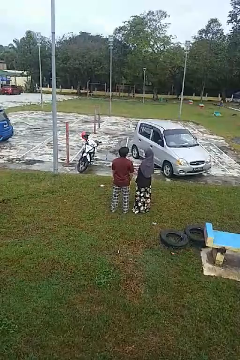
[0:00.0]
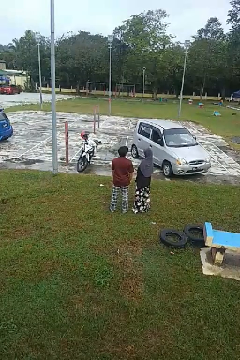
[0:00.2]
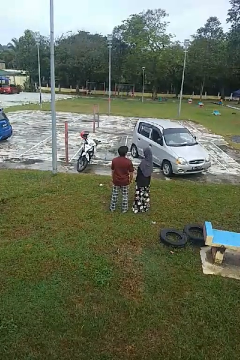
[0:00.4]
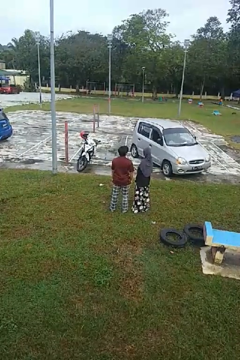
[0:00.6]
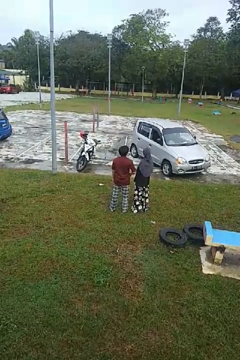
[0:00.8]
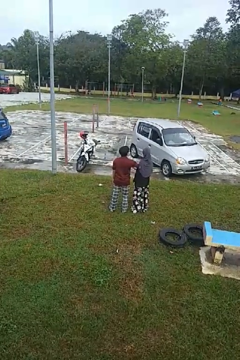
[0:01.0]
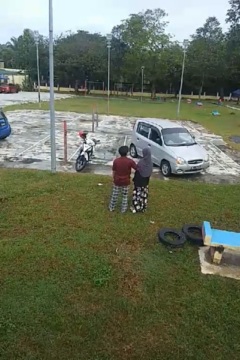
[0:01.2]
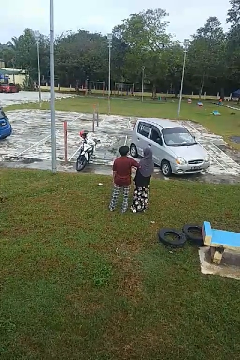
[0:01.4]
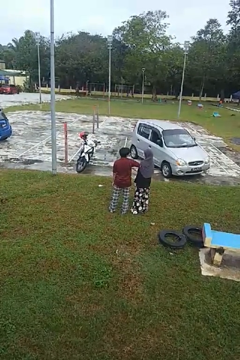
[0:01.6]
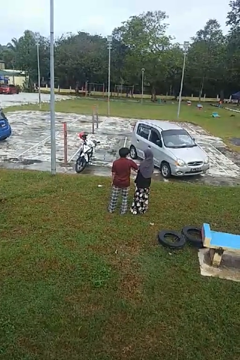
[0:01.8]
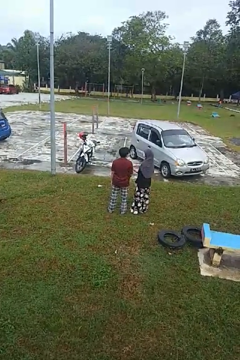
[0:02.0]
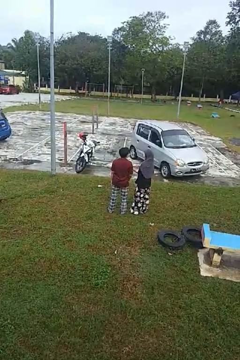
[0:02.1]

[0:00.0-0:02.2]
person nudges person with elbow

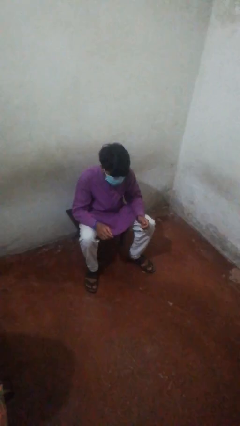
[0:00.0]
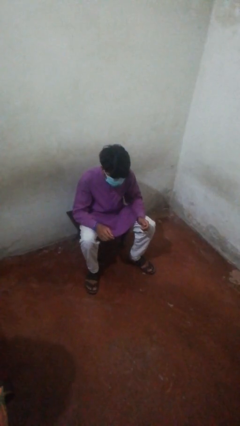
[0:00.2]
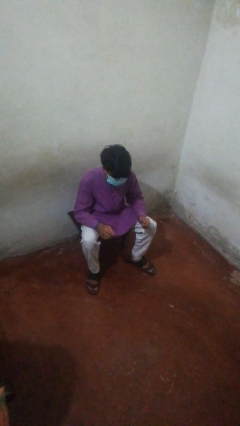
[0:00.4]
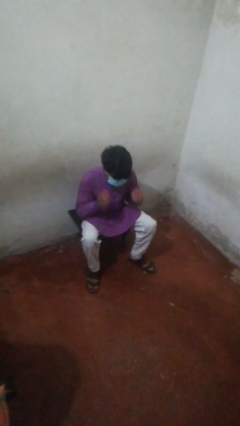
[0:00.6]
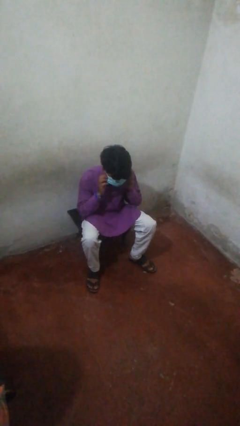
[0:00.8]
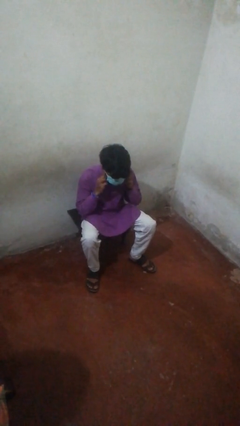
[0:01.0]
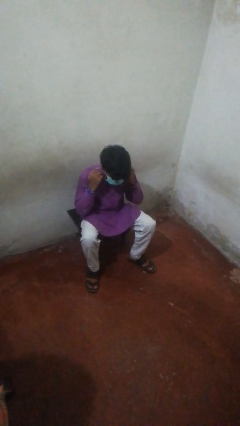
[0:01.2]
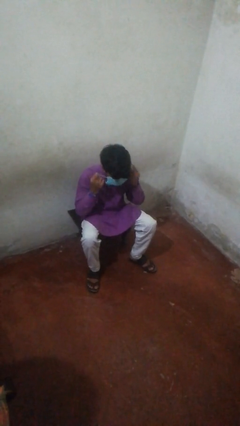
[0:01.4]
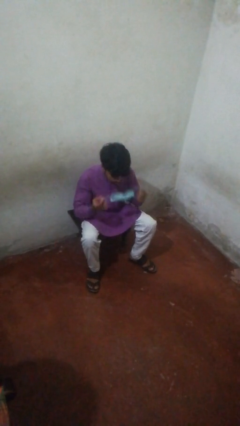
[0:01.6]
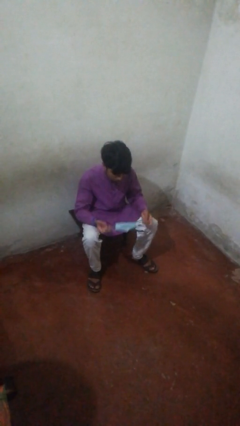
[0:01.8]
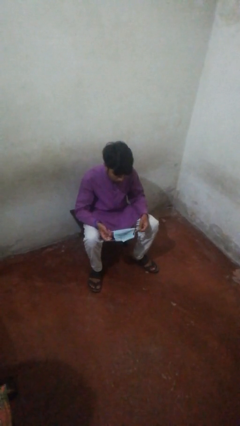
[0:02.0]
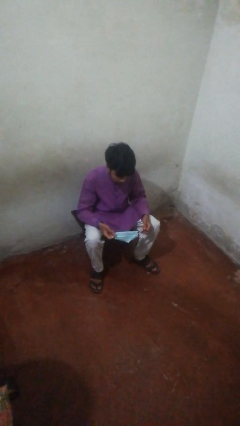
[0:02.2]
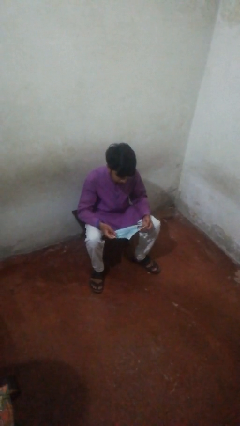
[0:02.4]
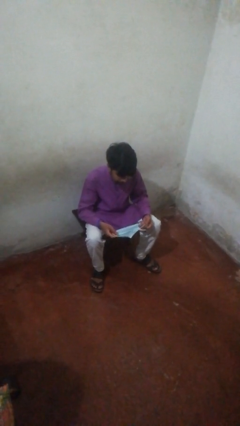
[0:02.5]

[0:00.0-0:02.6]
person takes off facemask

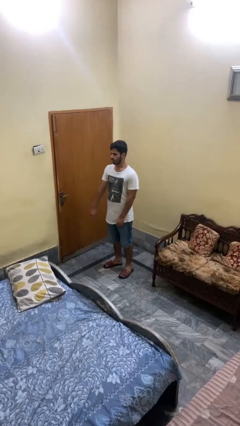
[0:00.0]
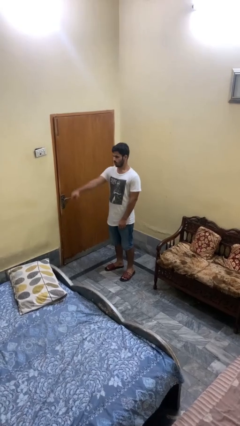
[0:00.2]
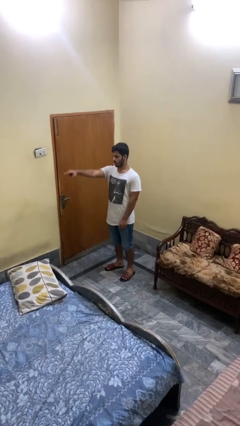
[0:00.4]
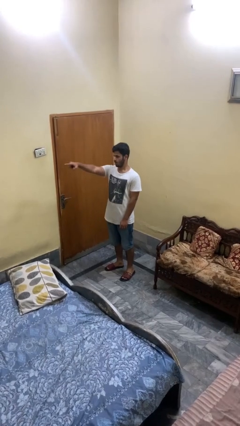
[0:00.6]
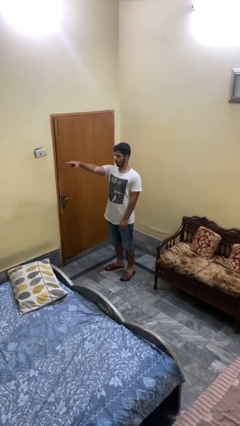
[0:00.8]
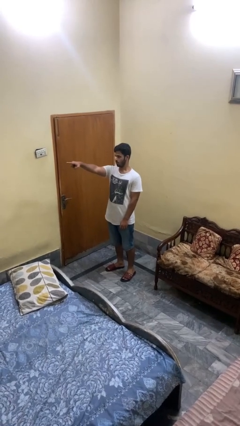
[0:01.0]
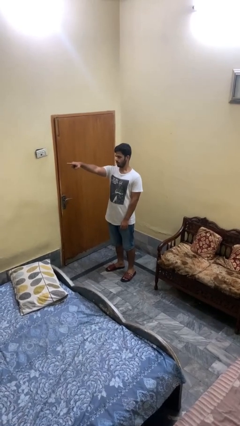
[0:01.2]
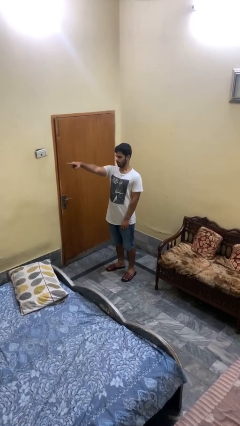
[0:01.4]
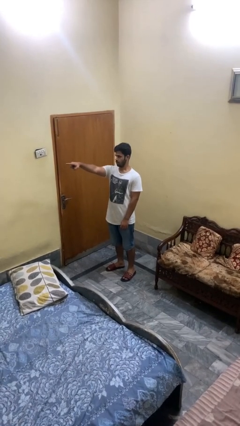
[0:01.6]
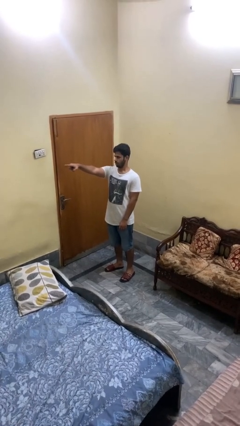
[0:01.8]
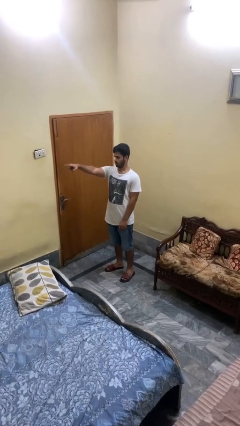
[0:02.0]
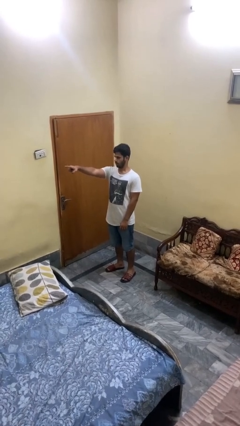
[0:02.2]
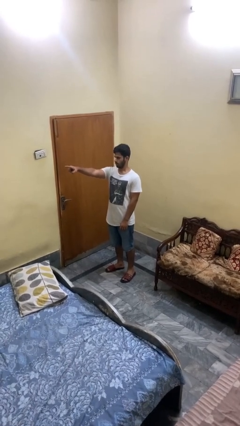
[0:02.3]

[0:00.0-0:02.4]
person points at person

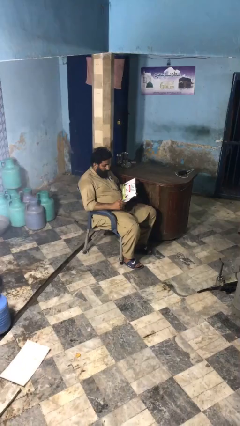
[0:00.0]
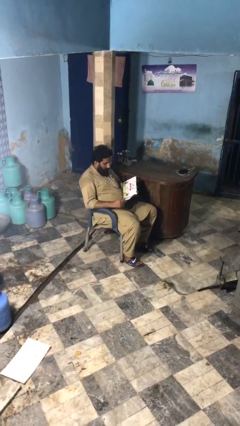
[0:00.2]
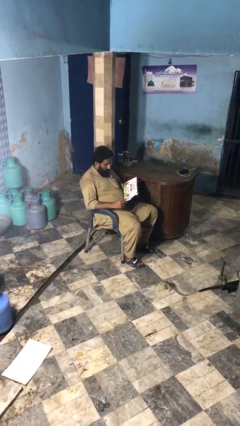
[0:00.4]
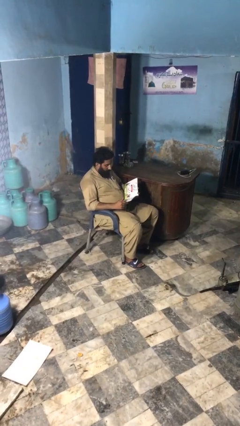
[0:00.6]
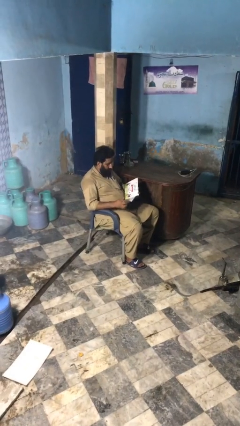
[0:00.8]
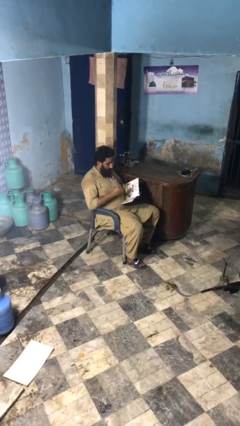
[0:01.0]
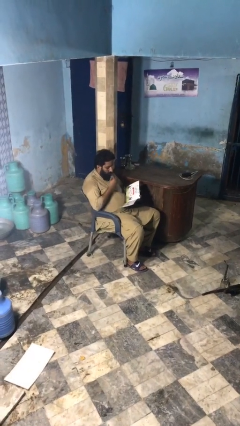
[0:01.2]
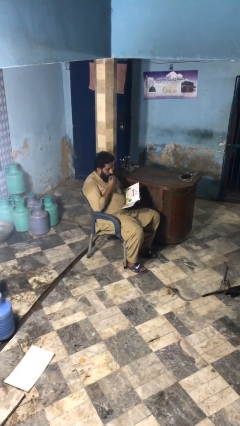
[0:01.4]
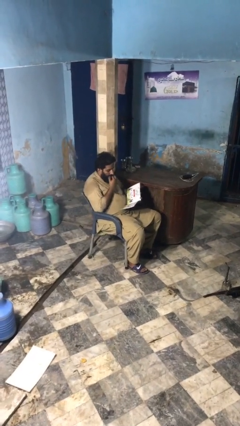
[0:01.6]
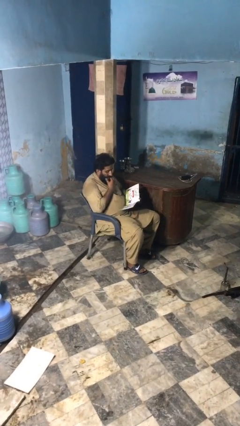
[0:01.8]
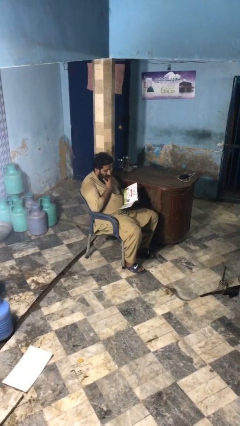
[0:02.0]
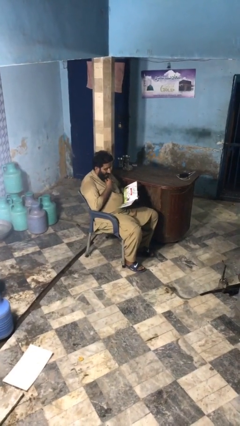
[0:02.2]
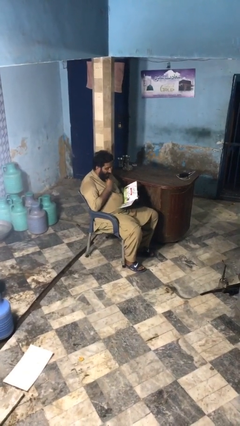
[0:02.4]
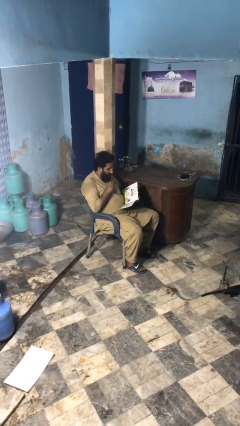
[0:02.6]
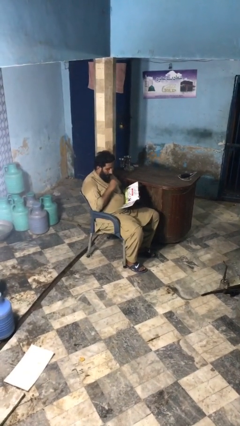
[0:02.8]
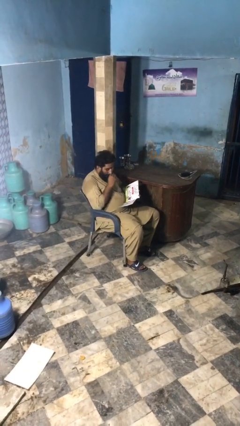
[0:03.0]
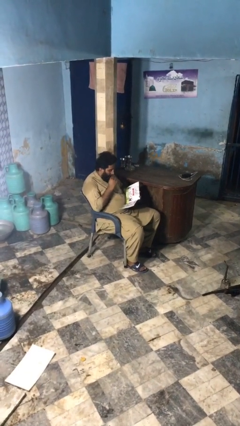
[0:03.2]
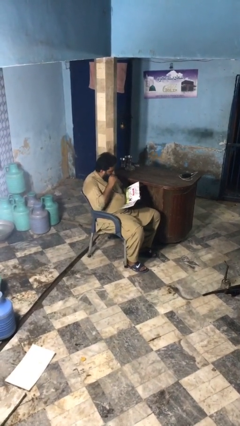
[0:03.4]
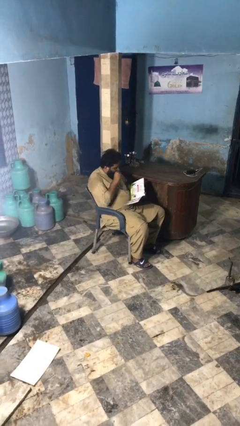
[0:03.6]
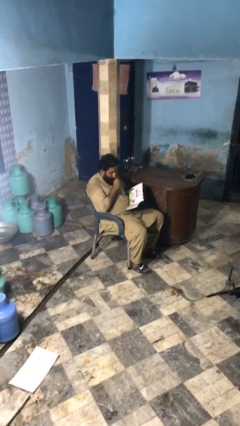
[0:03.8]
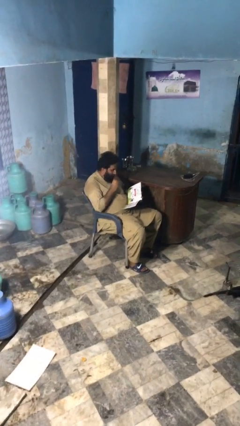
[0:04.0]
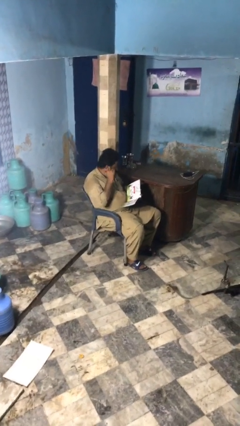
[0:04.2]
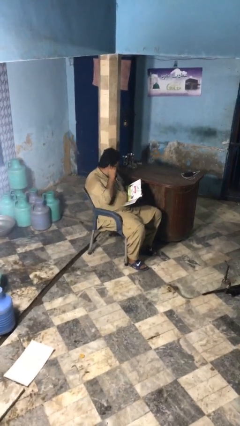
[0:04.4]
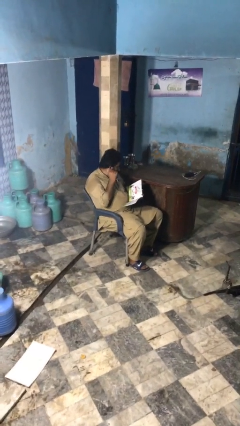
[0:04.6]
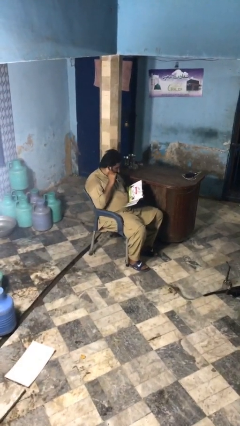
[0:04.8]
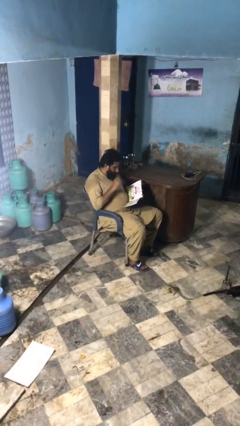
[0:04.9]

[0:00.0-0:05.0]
person reads document

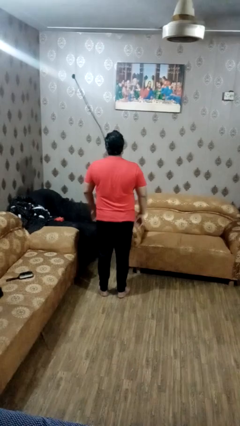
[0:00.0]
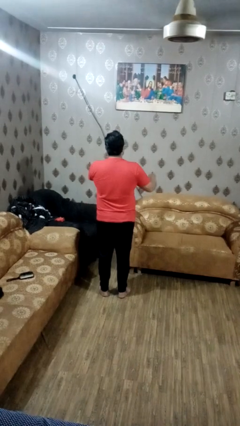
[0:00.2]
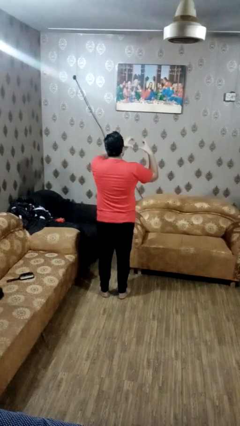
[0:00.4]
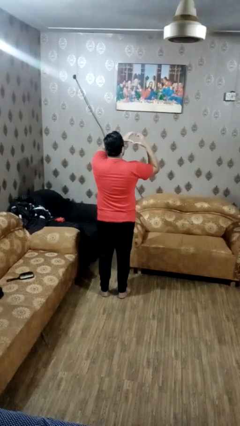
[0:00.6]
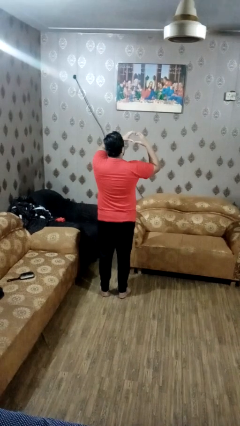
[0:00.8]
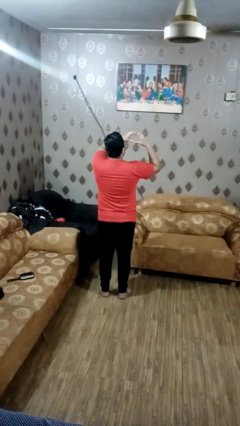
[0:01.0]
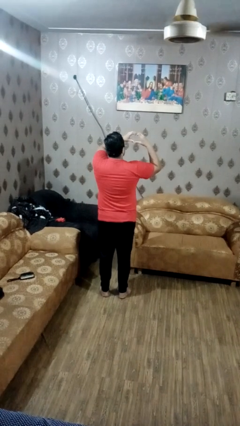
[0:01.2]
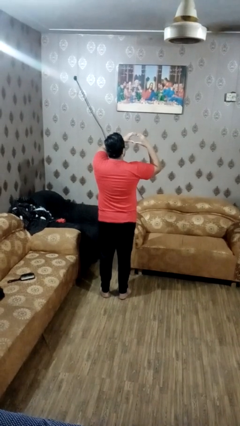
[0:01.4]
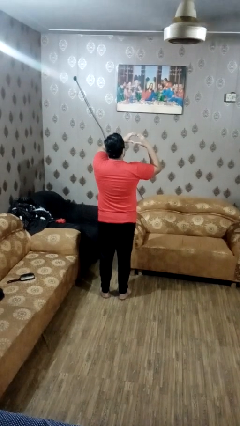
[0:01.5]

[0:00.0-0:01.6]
person gestures heart

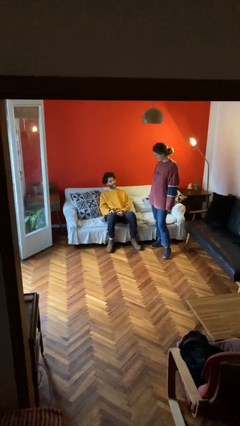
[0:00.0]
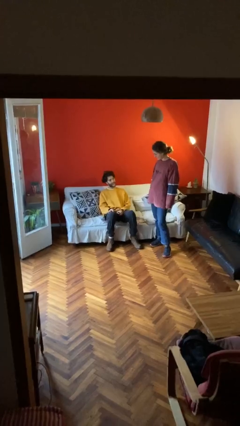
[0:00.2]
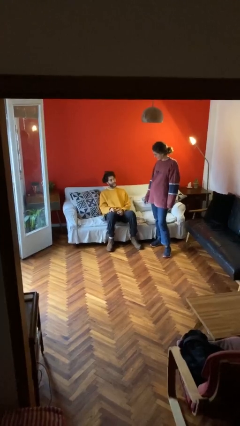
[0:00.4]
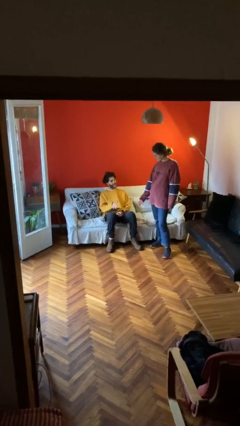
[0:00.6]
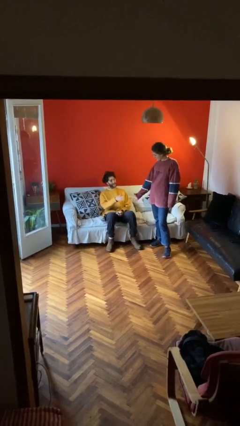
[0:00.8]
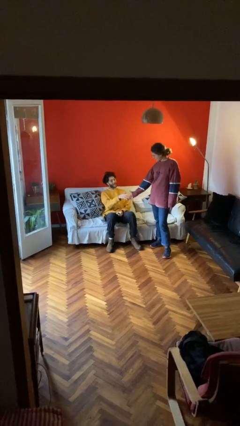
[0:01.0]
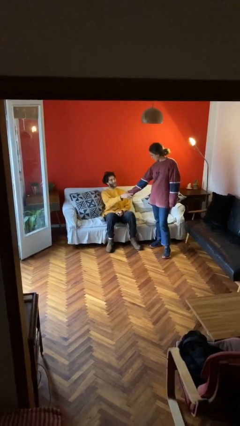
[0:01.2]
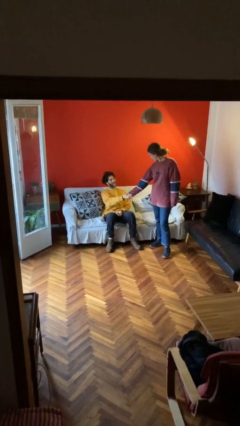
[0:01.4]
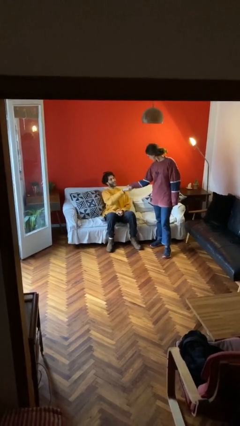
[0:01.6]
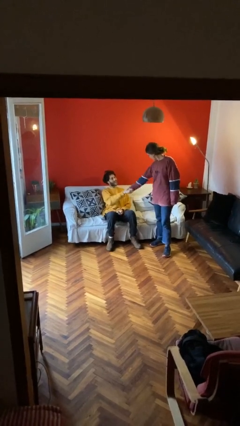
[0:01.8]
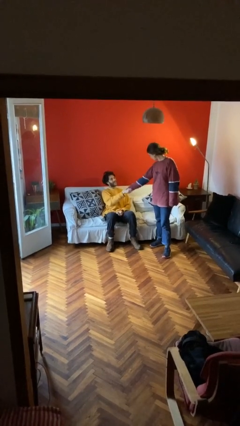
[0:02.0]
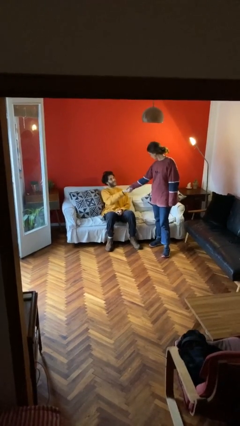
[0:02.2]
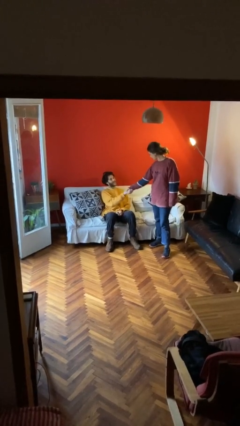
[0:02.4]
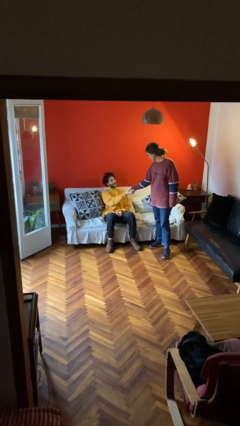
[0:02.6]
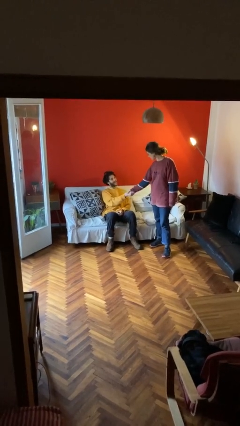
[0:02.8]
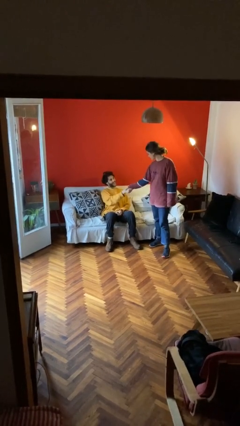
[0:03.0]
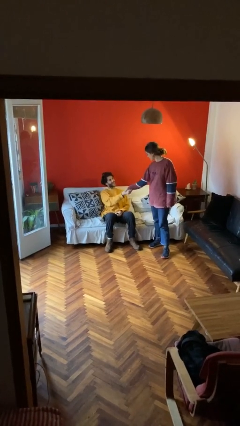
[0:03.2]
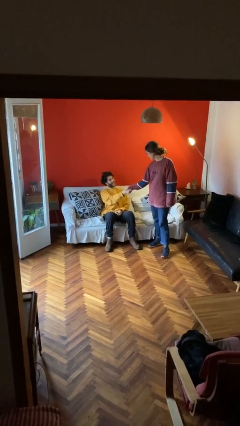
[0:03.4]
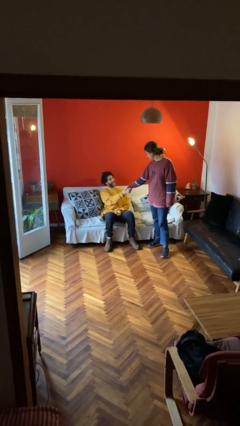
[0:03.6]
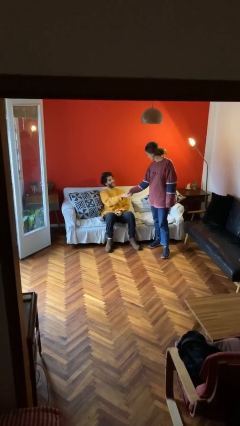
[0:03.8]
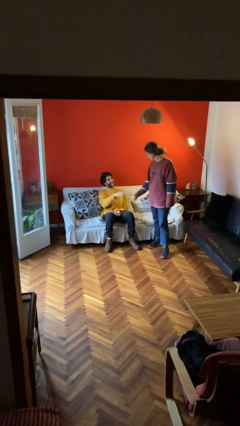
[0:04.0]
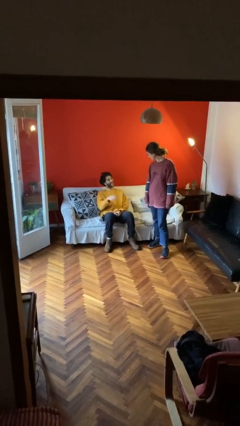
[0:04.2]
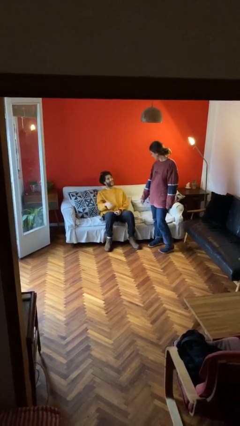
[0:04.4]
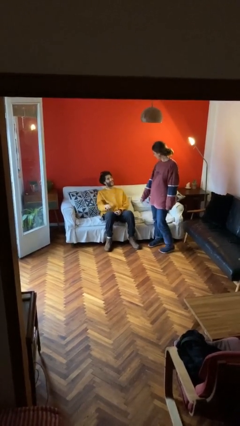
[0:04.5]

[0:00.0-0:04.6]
person shakes hand
